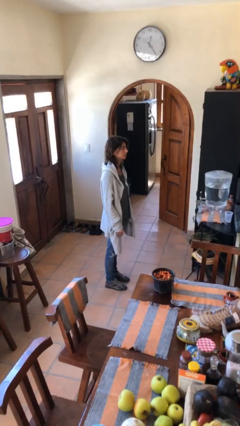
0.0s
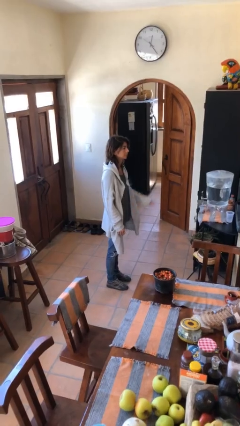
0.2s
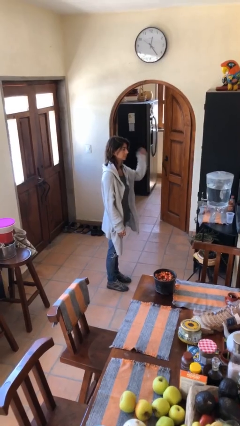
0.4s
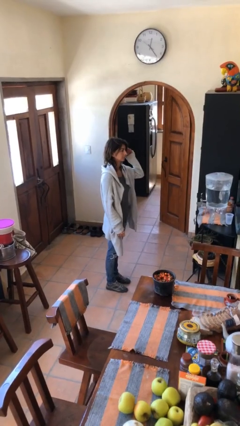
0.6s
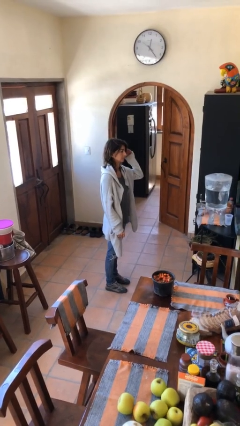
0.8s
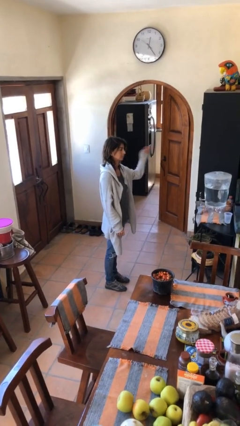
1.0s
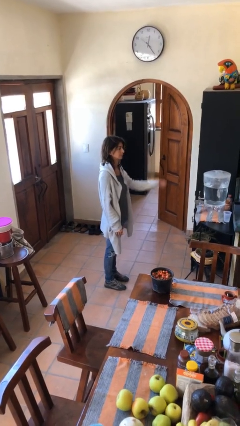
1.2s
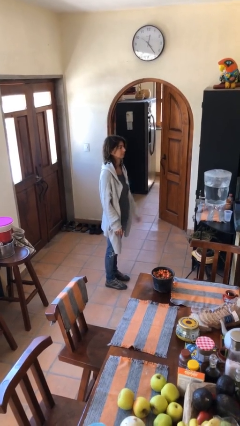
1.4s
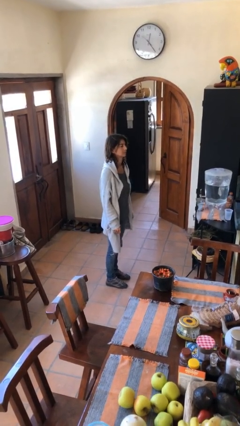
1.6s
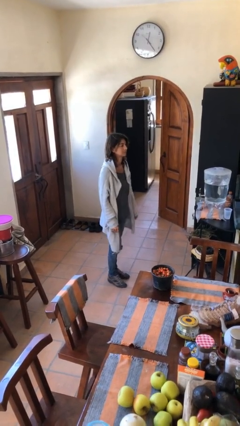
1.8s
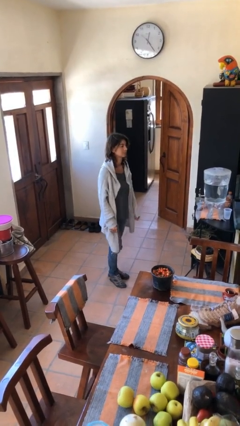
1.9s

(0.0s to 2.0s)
person salutes

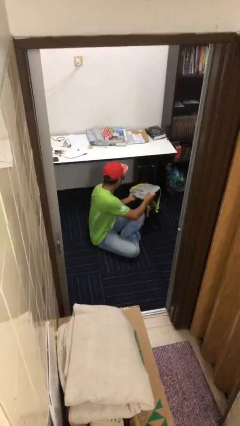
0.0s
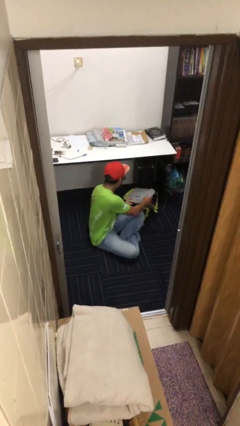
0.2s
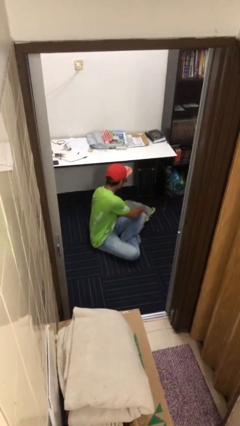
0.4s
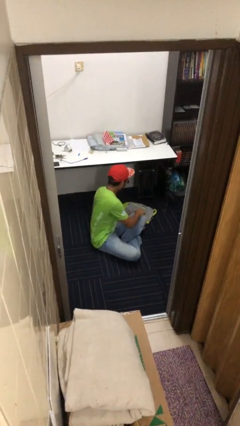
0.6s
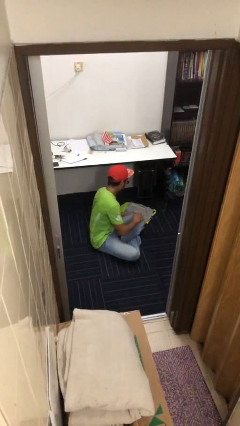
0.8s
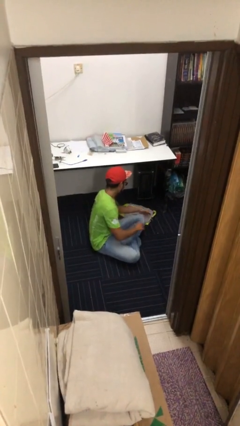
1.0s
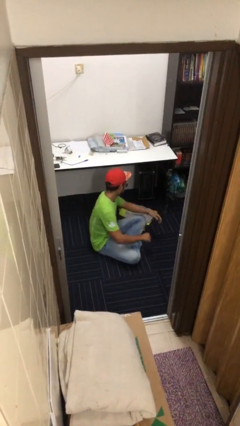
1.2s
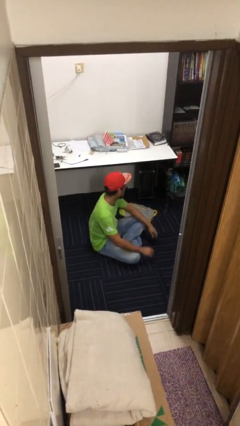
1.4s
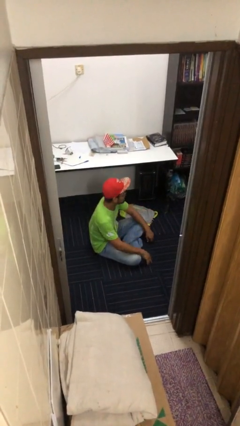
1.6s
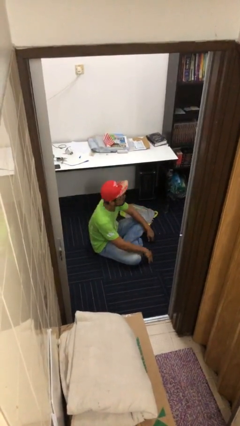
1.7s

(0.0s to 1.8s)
person puts down object on floor

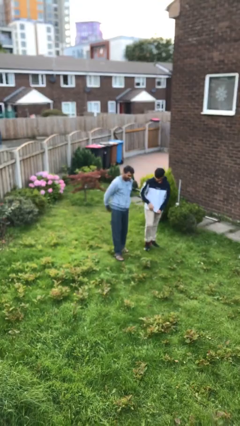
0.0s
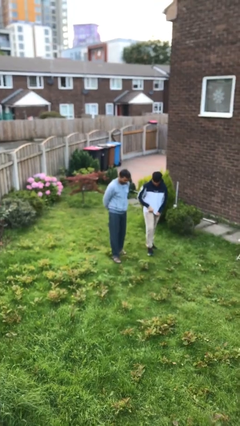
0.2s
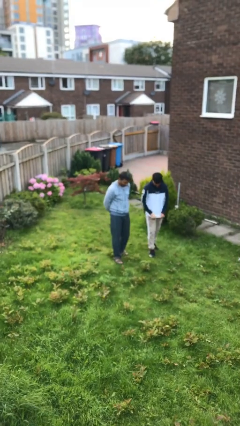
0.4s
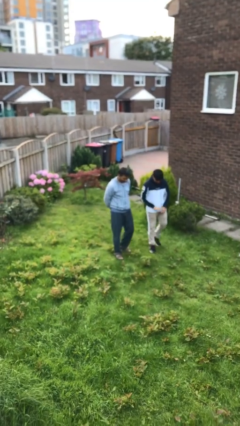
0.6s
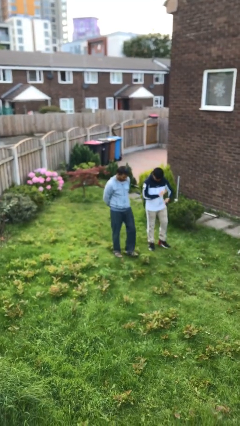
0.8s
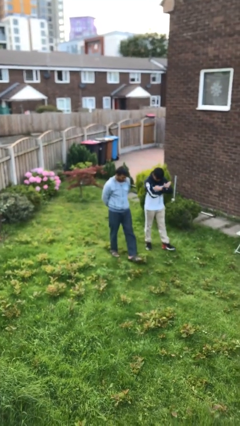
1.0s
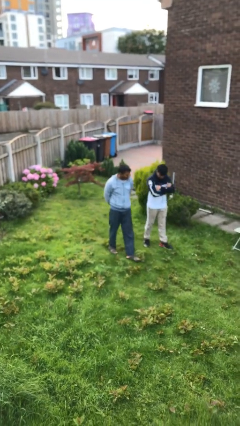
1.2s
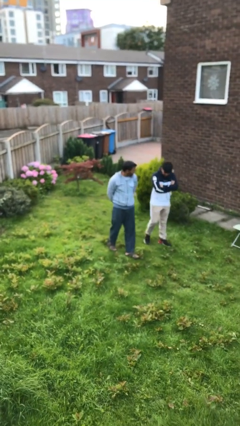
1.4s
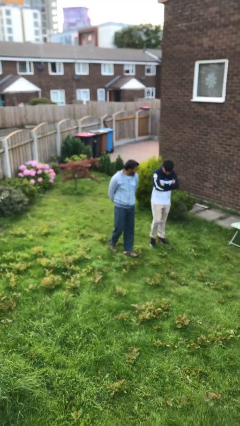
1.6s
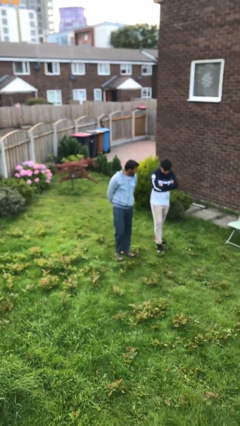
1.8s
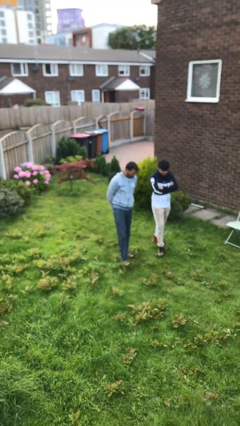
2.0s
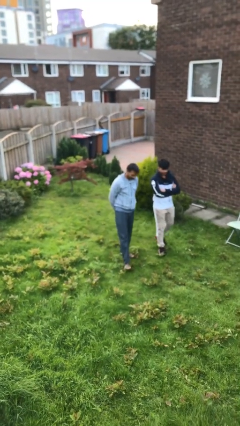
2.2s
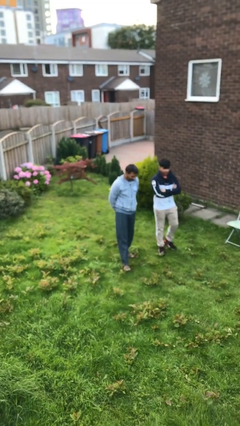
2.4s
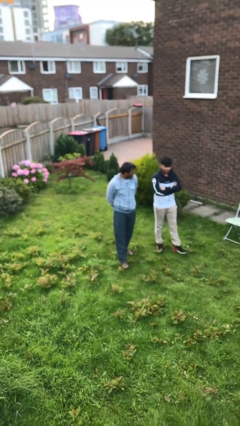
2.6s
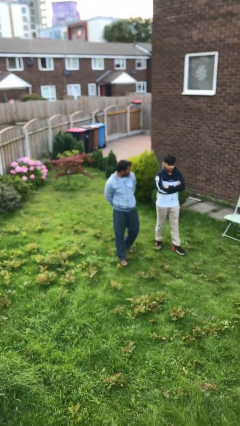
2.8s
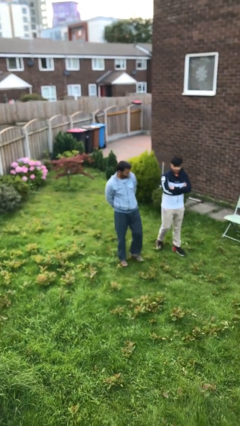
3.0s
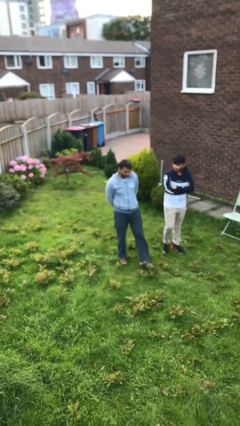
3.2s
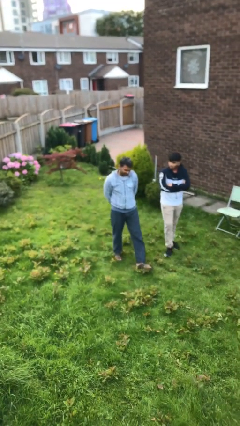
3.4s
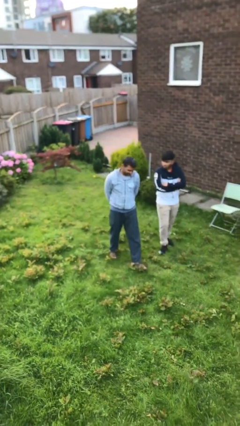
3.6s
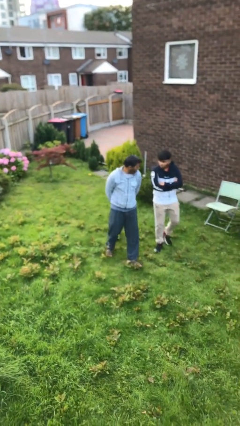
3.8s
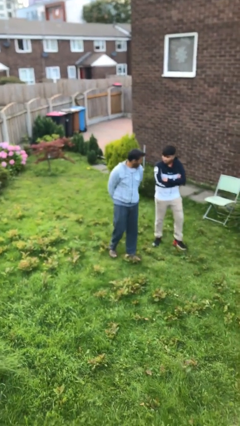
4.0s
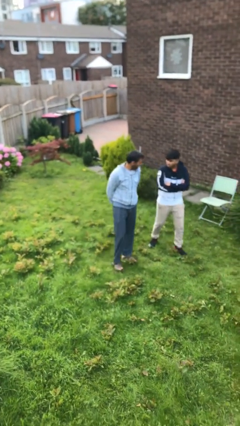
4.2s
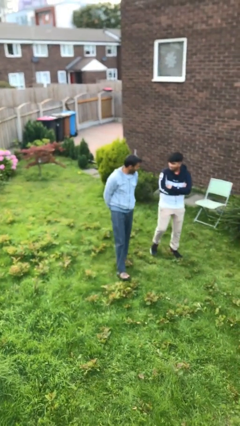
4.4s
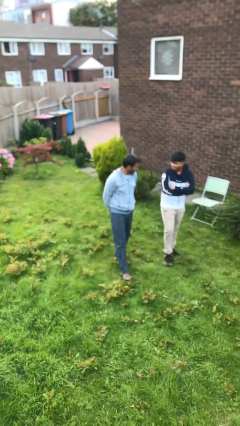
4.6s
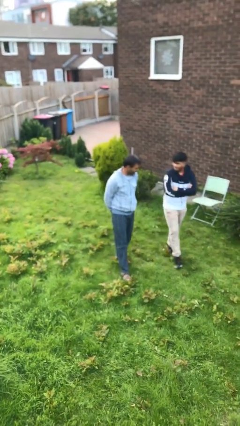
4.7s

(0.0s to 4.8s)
person talks to person

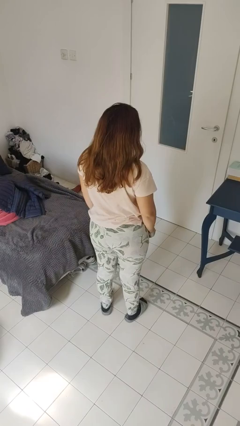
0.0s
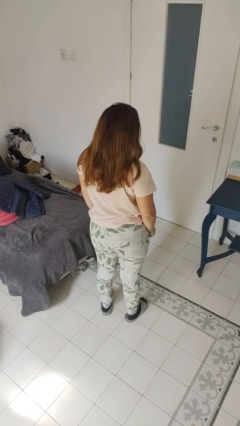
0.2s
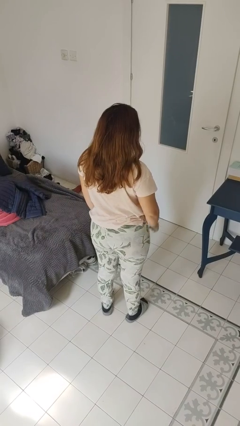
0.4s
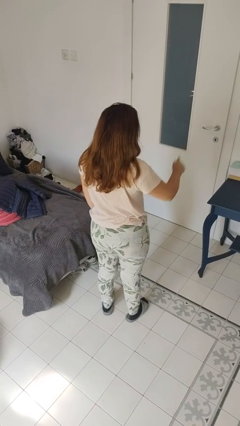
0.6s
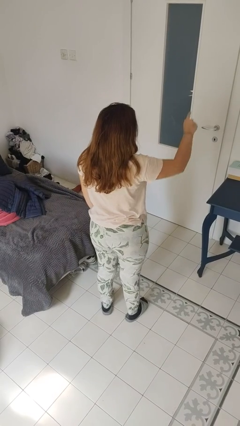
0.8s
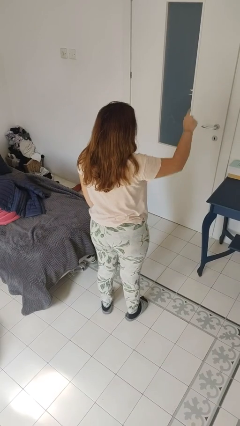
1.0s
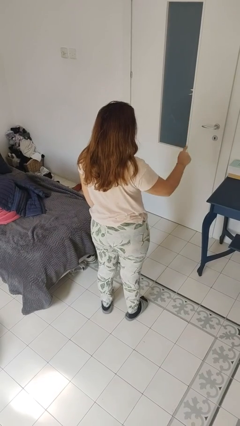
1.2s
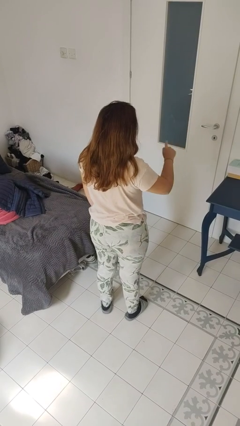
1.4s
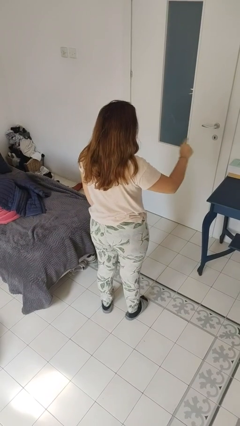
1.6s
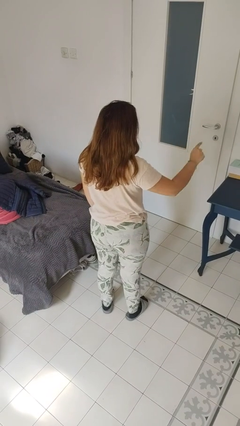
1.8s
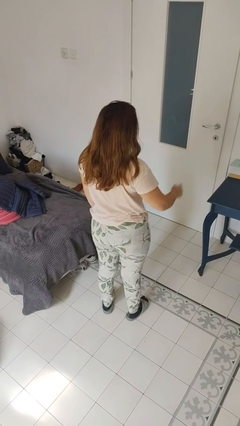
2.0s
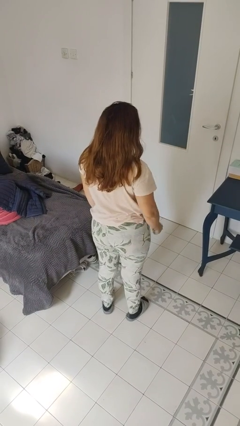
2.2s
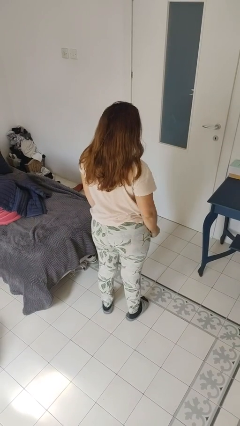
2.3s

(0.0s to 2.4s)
person gestures number one

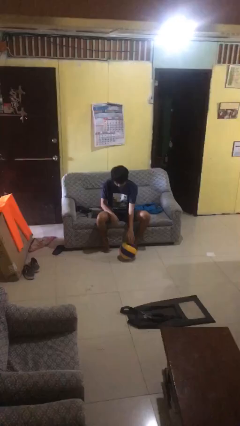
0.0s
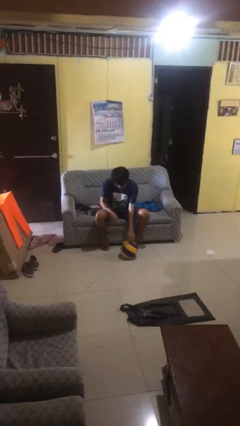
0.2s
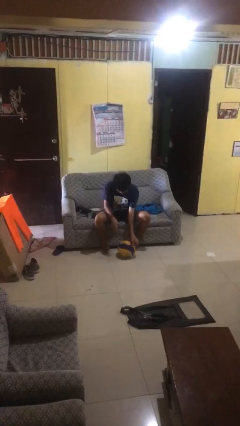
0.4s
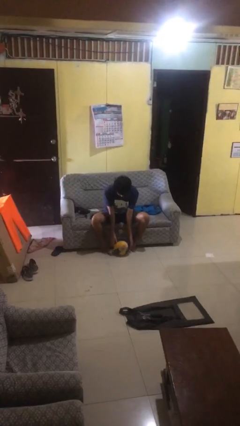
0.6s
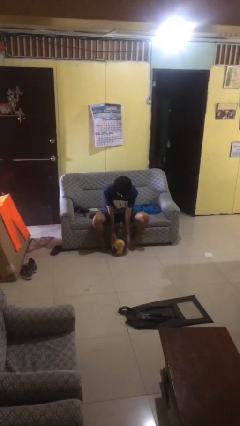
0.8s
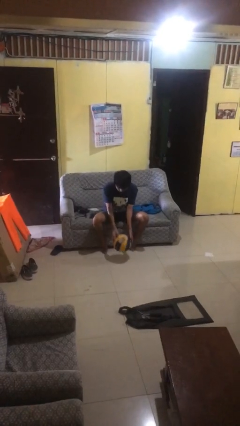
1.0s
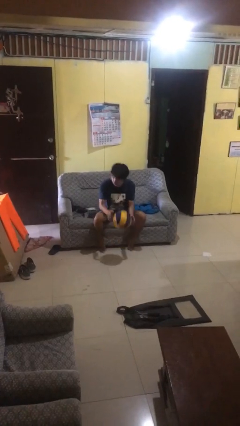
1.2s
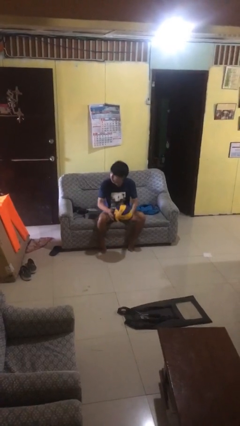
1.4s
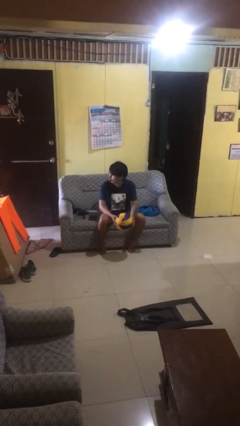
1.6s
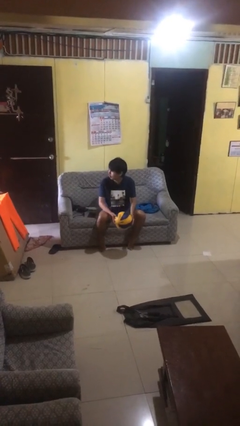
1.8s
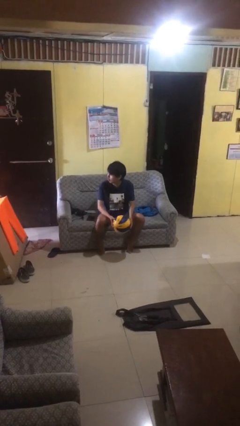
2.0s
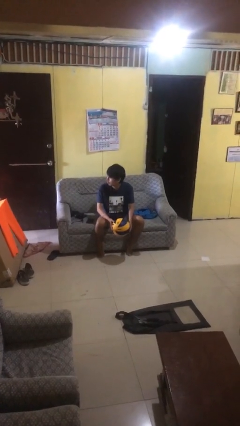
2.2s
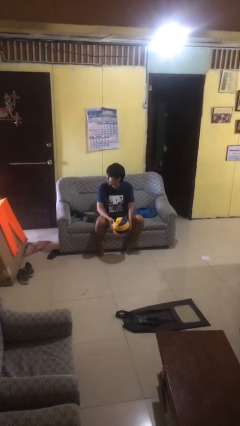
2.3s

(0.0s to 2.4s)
person picks up object from floor

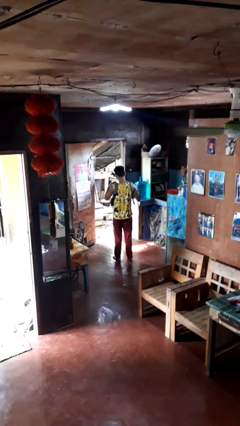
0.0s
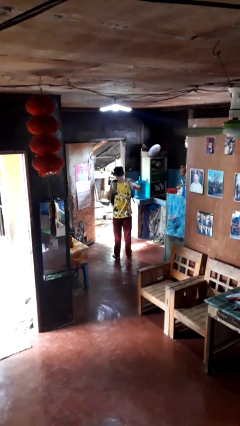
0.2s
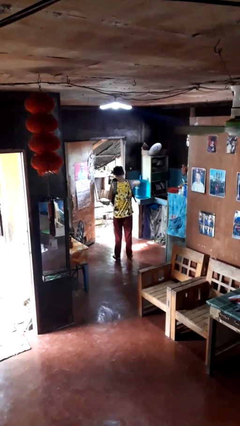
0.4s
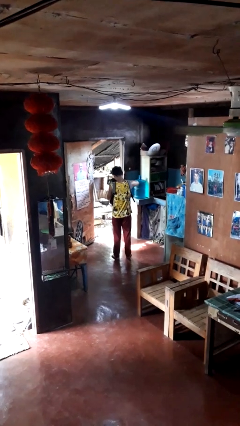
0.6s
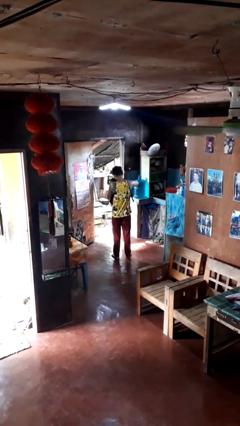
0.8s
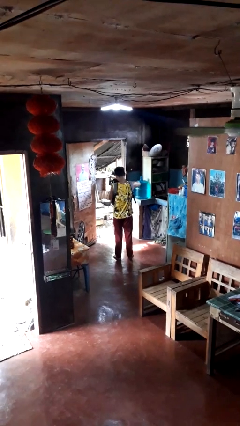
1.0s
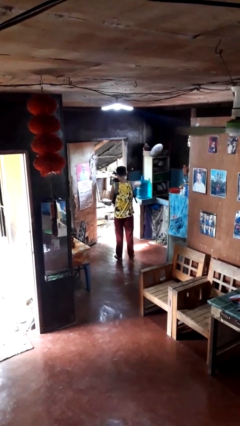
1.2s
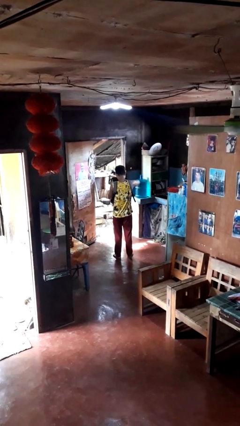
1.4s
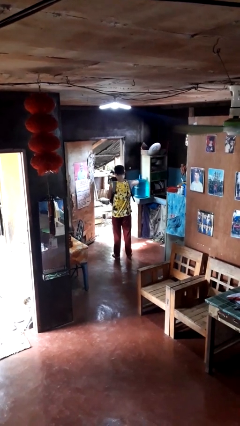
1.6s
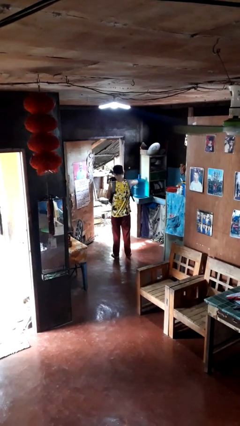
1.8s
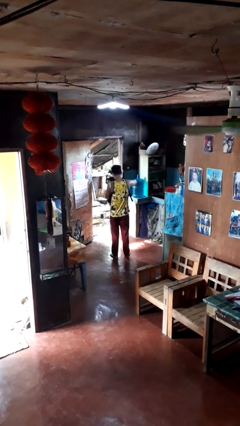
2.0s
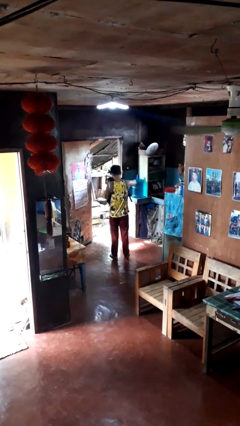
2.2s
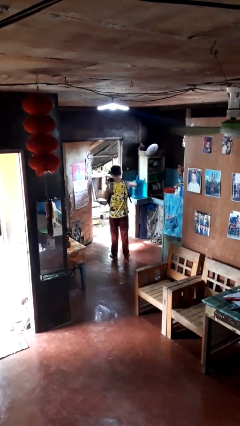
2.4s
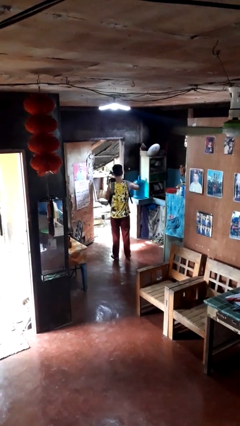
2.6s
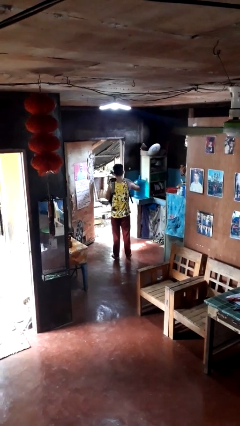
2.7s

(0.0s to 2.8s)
person searches in backpack

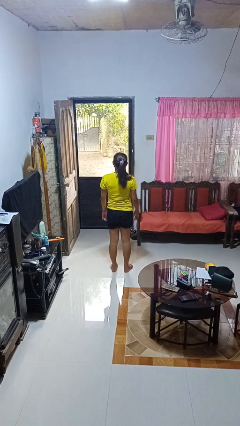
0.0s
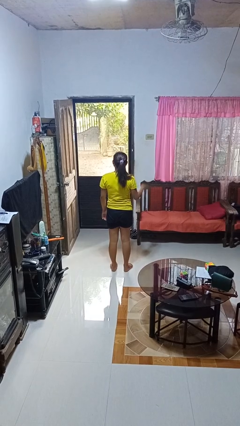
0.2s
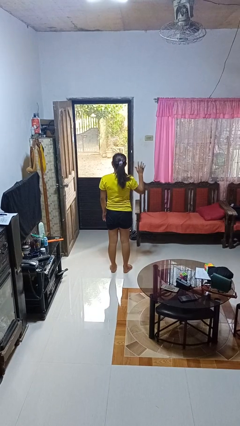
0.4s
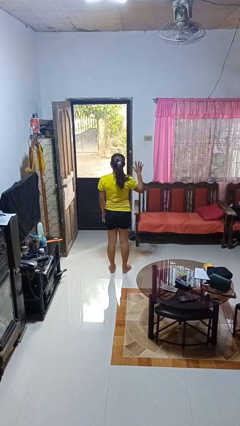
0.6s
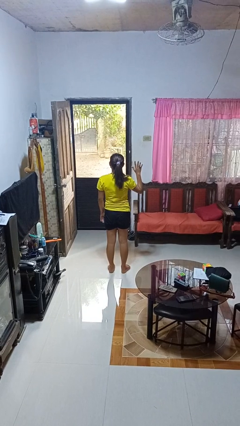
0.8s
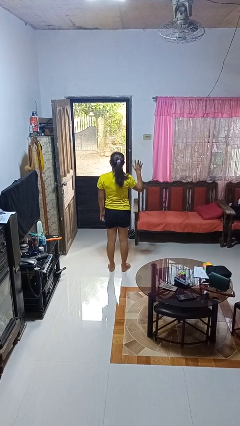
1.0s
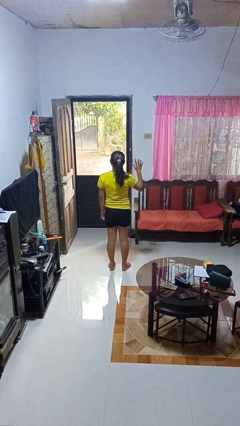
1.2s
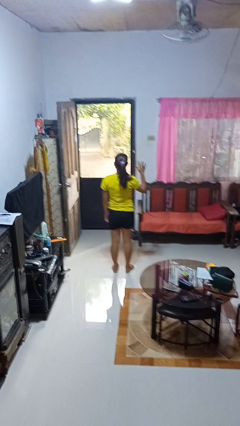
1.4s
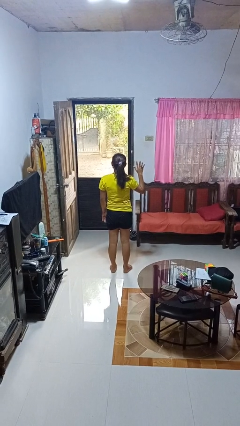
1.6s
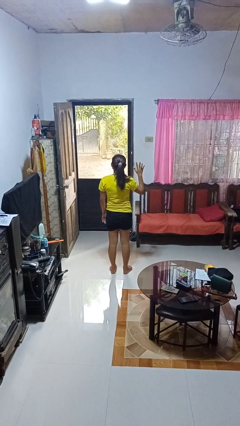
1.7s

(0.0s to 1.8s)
person gestures number five
